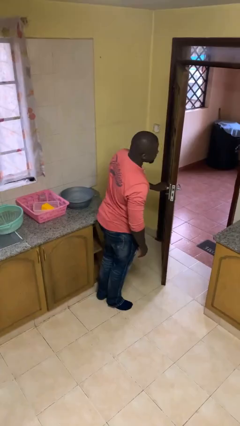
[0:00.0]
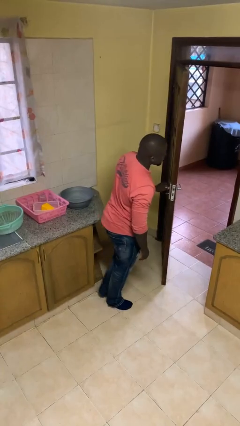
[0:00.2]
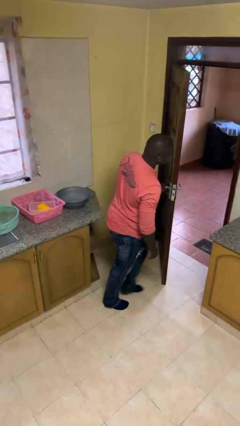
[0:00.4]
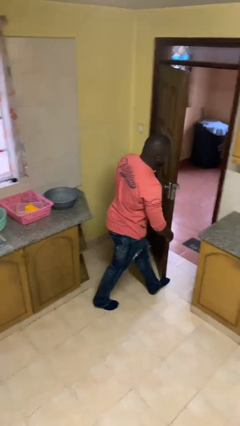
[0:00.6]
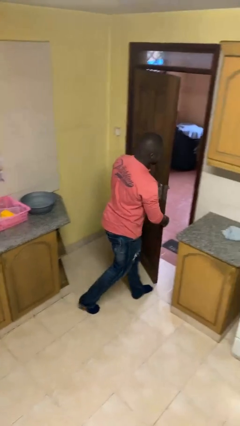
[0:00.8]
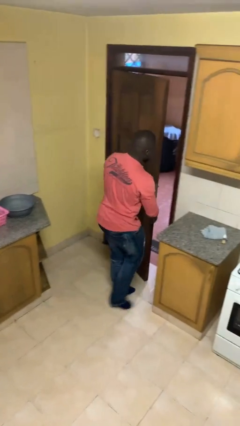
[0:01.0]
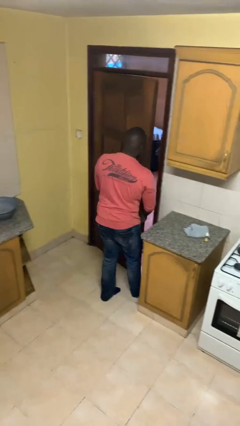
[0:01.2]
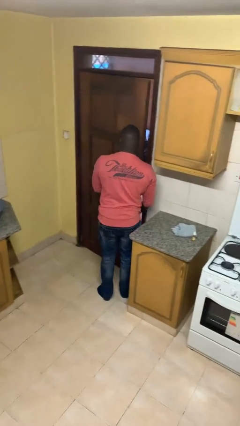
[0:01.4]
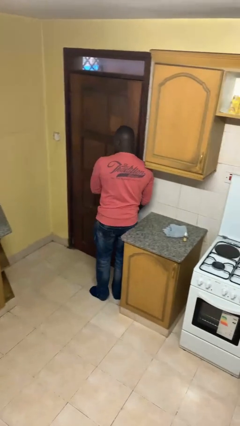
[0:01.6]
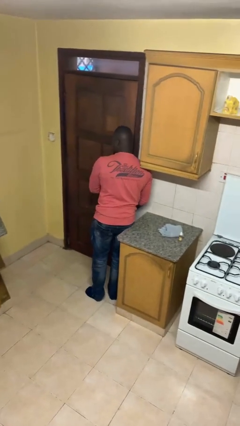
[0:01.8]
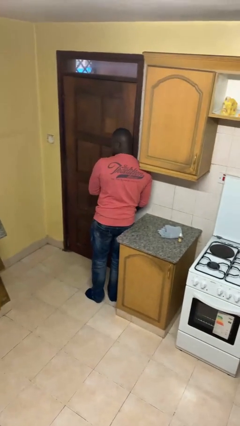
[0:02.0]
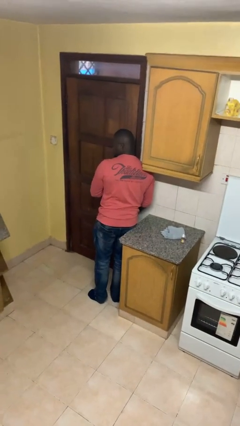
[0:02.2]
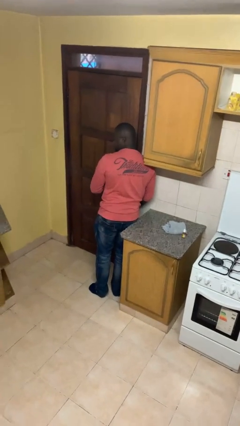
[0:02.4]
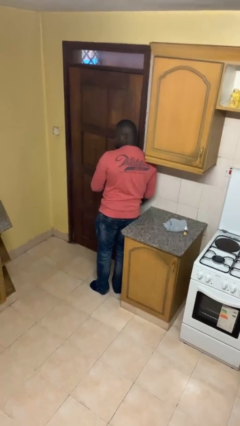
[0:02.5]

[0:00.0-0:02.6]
person closes facility door

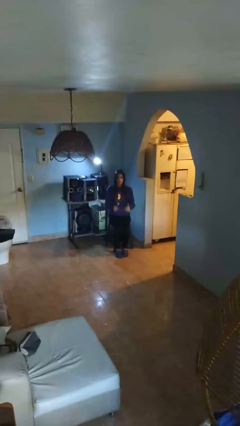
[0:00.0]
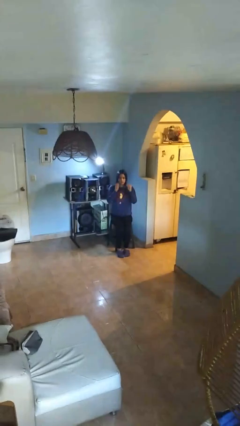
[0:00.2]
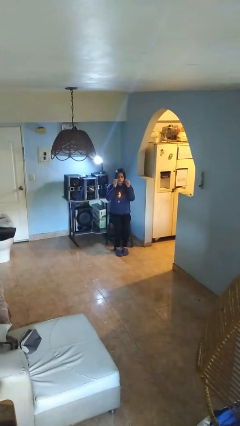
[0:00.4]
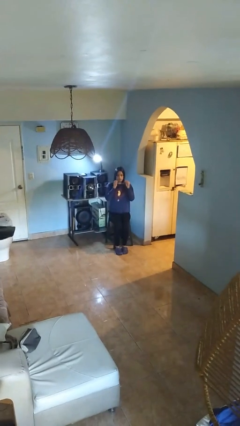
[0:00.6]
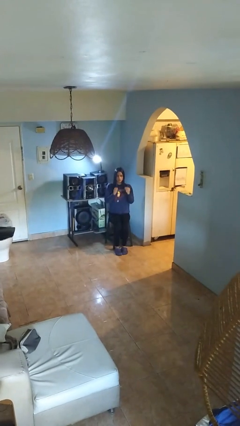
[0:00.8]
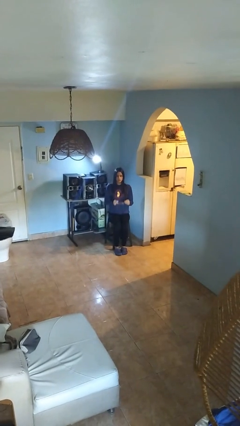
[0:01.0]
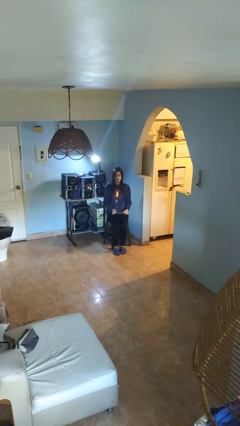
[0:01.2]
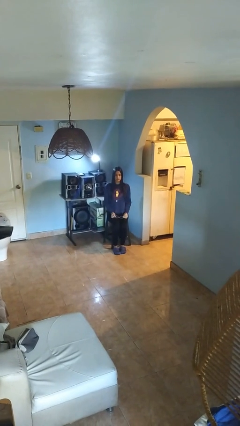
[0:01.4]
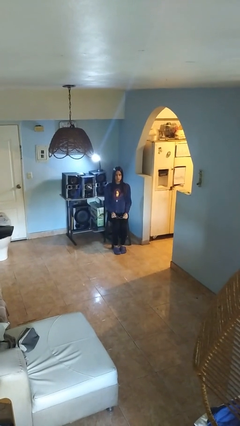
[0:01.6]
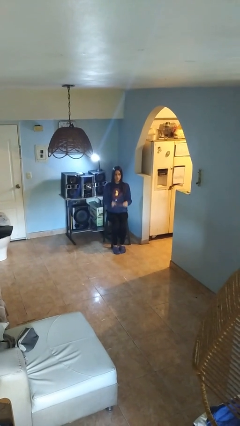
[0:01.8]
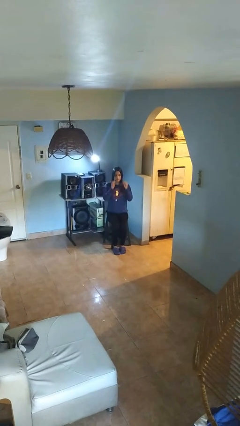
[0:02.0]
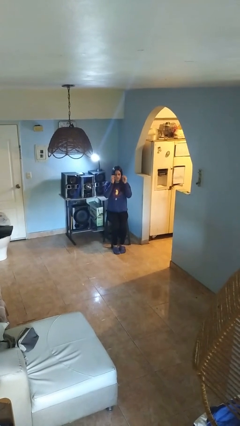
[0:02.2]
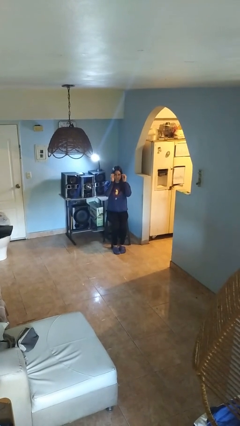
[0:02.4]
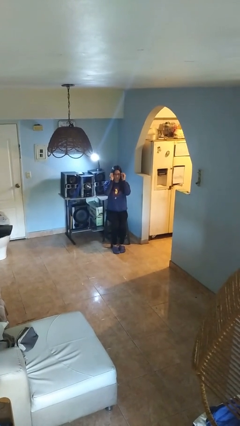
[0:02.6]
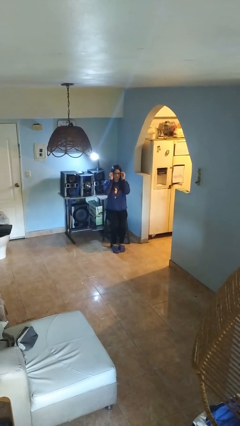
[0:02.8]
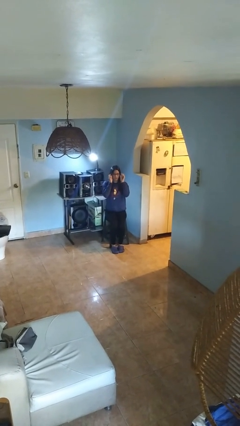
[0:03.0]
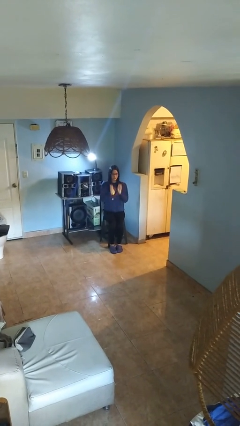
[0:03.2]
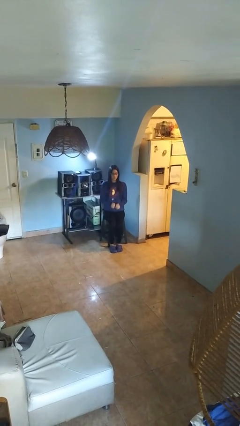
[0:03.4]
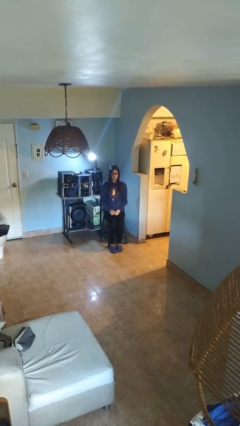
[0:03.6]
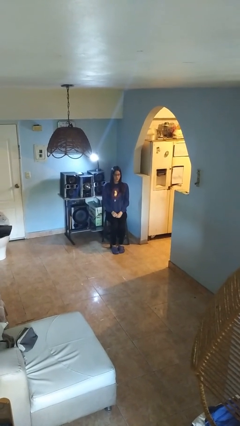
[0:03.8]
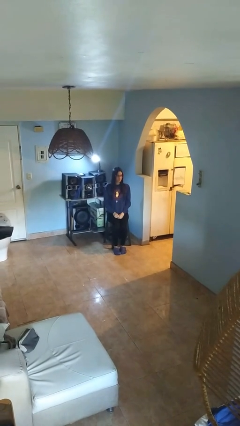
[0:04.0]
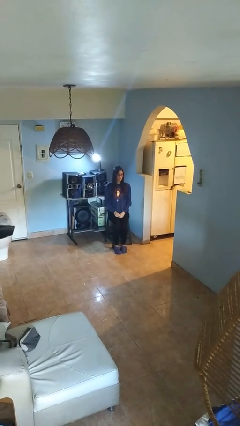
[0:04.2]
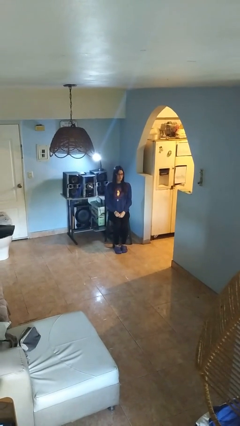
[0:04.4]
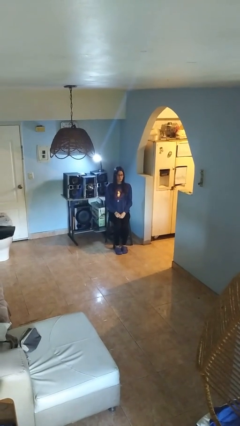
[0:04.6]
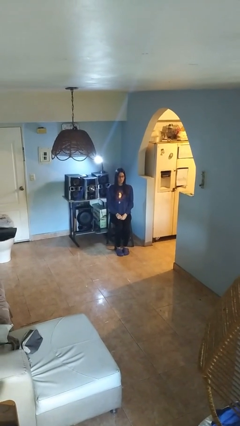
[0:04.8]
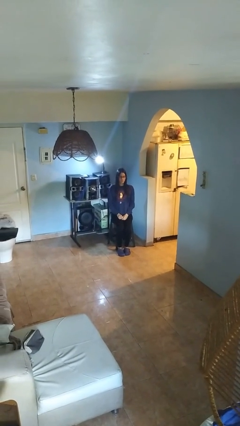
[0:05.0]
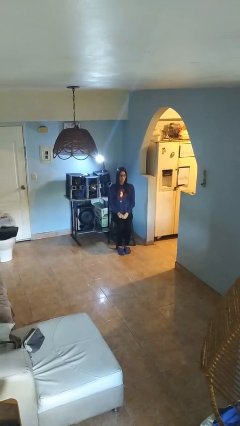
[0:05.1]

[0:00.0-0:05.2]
person puts on glasses

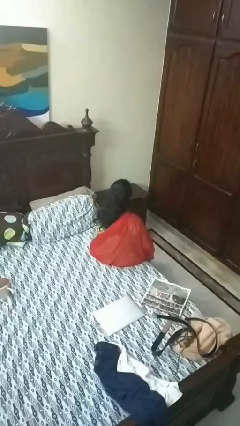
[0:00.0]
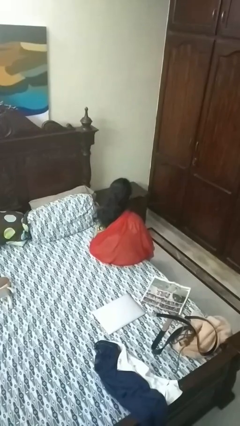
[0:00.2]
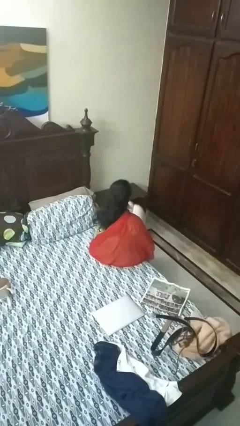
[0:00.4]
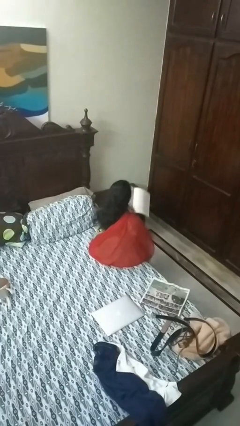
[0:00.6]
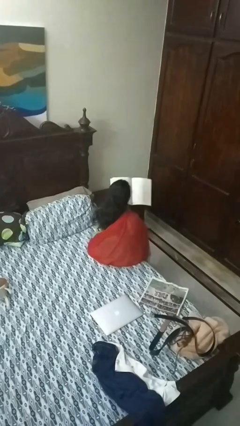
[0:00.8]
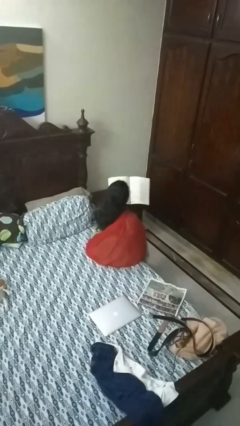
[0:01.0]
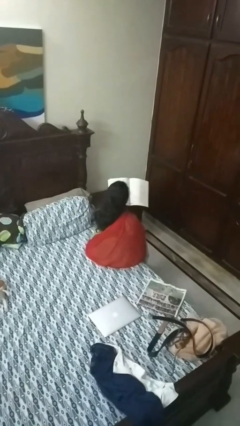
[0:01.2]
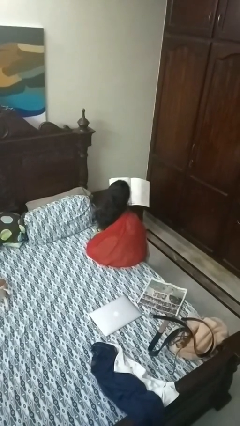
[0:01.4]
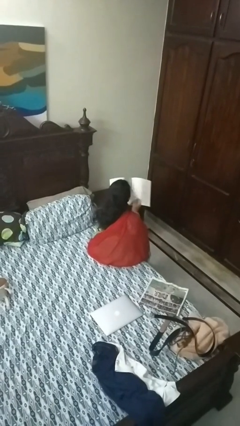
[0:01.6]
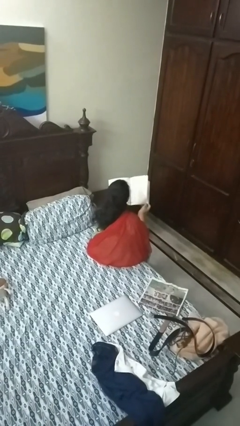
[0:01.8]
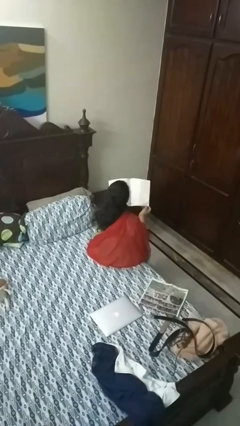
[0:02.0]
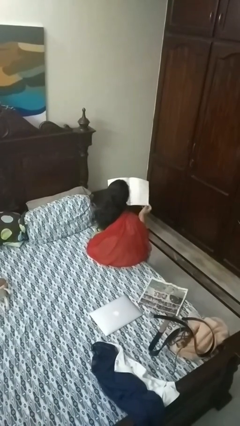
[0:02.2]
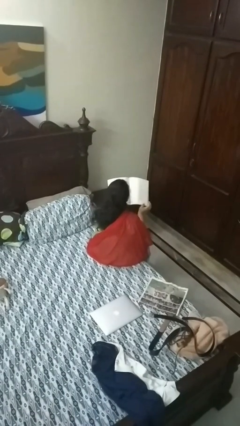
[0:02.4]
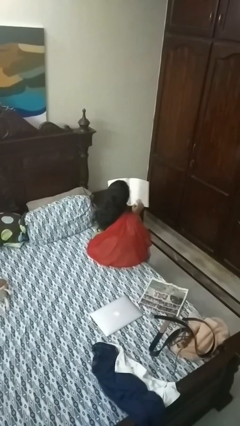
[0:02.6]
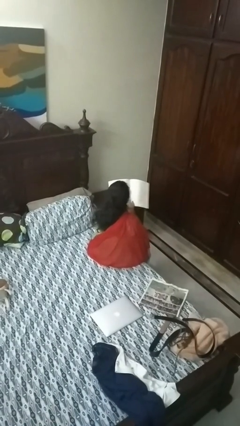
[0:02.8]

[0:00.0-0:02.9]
person reads book

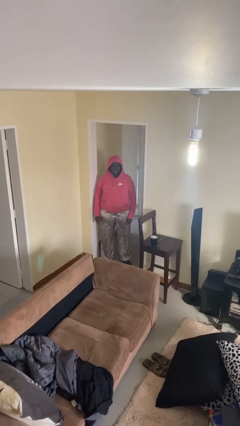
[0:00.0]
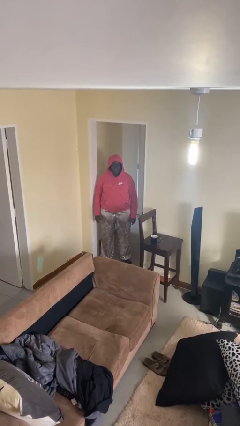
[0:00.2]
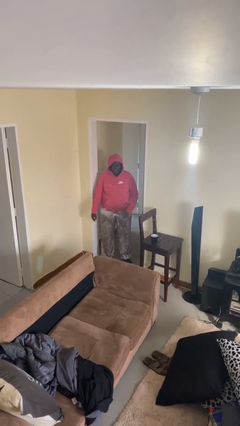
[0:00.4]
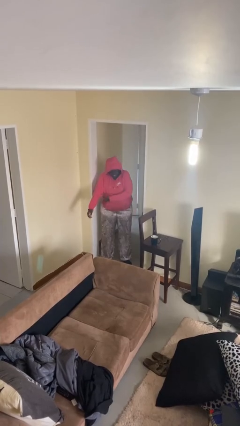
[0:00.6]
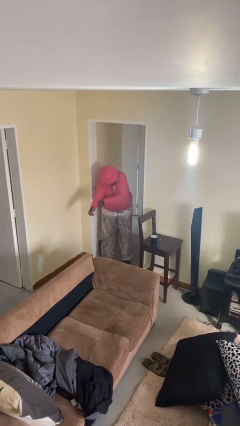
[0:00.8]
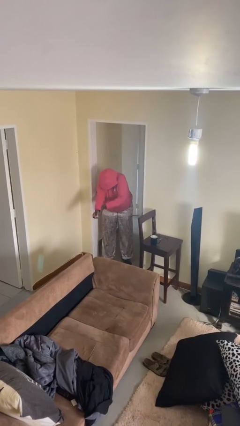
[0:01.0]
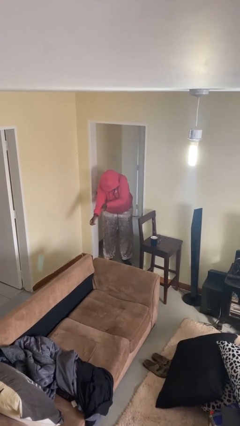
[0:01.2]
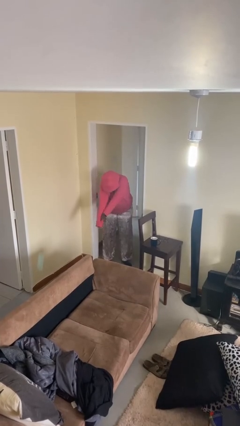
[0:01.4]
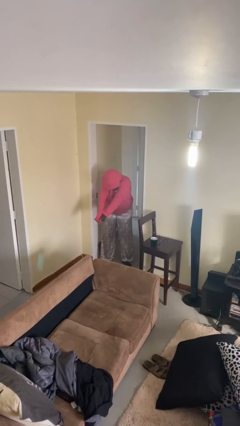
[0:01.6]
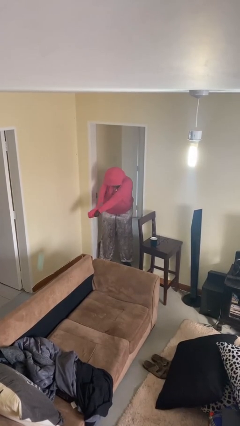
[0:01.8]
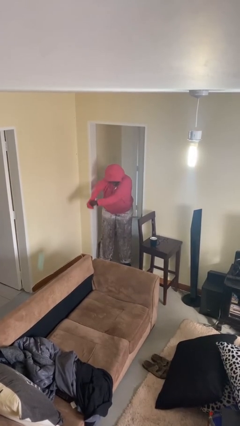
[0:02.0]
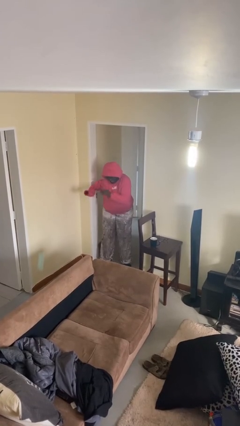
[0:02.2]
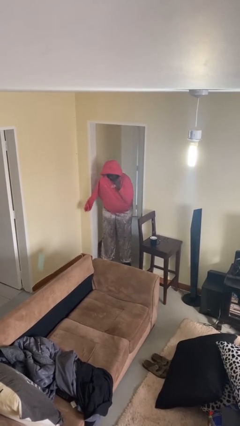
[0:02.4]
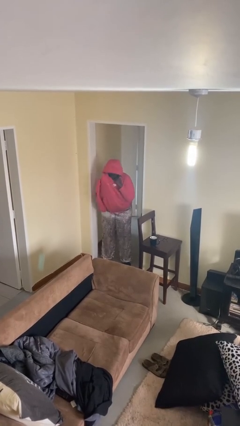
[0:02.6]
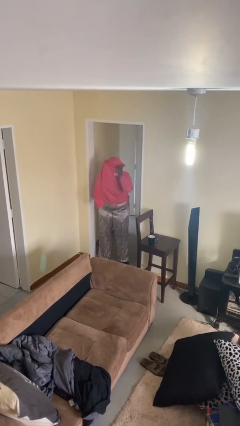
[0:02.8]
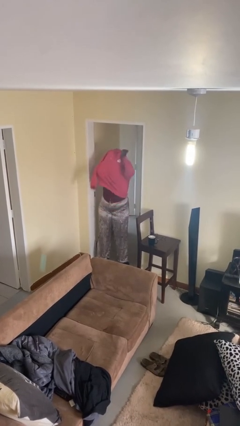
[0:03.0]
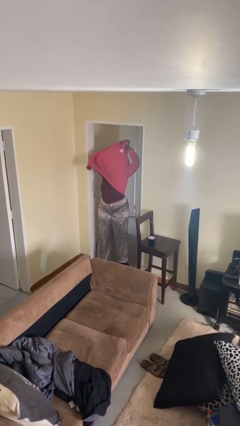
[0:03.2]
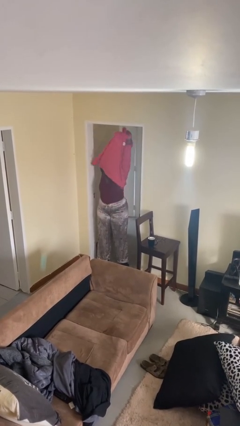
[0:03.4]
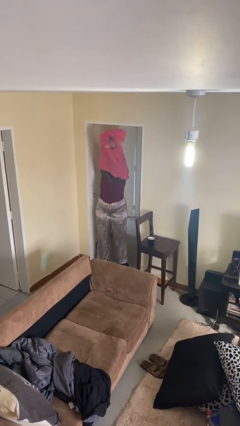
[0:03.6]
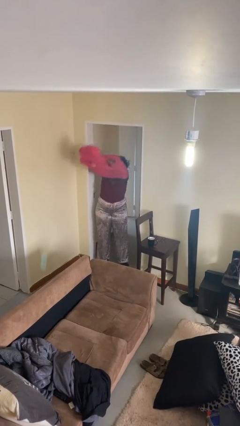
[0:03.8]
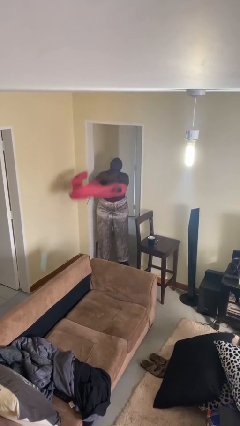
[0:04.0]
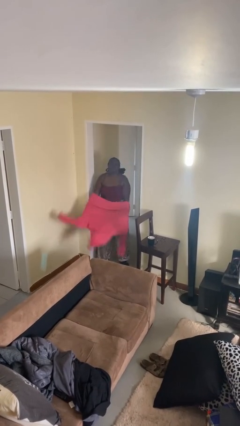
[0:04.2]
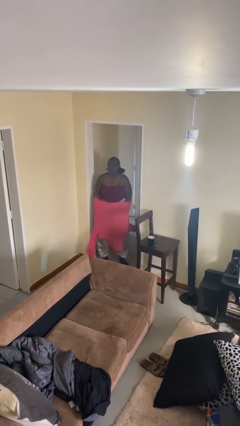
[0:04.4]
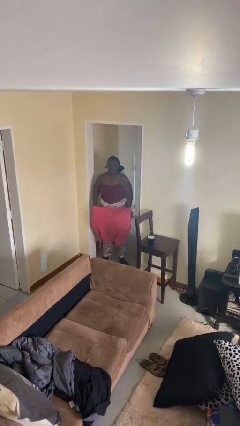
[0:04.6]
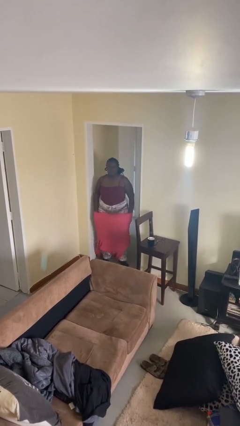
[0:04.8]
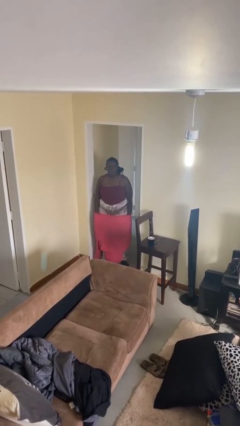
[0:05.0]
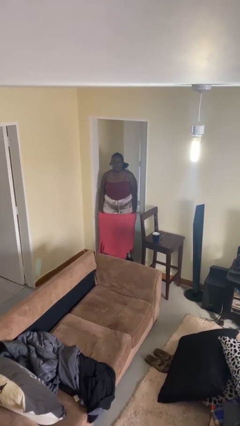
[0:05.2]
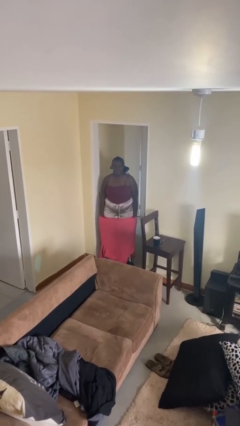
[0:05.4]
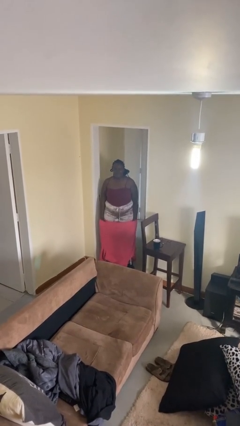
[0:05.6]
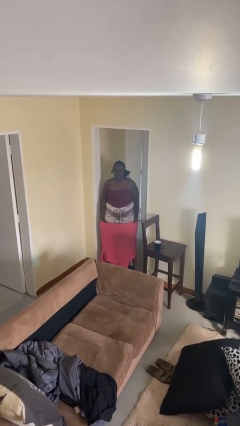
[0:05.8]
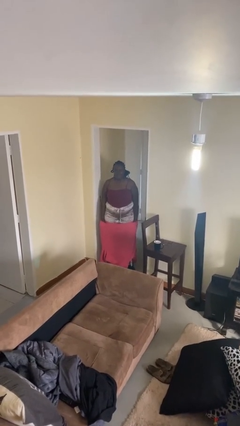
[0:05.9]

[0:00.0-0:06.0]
person takes off hoodie

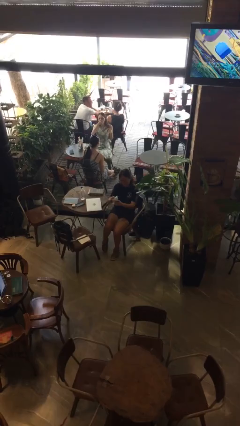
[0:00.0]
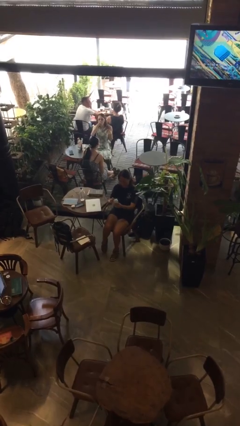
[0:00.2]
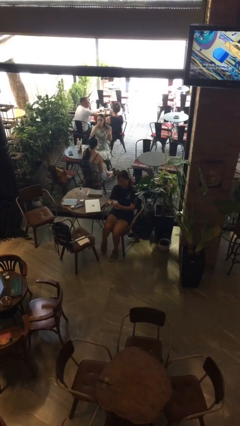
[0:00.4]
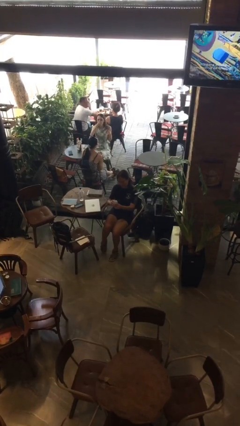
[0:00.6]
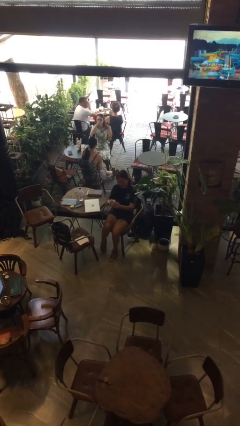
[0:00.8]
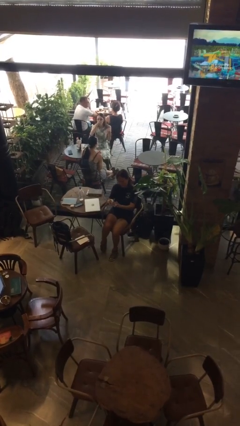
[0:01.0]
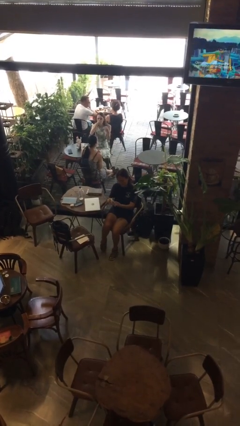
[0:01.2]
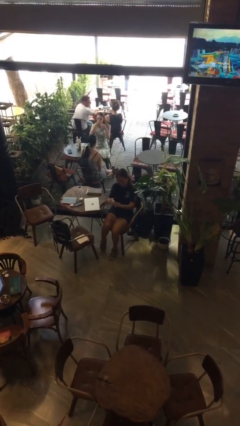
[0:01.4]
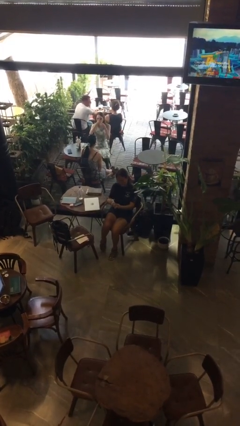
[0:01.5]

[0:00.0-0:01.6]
person squeezes object
